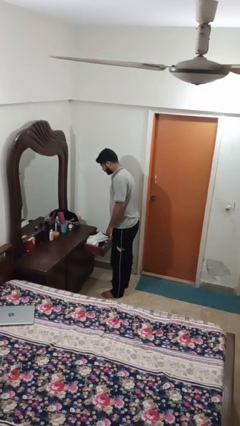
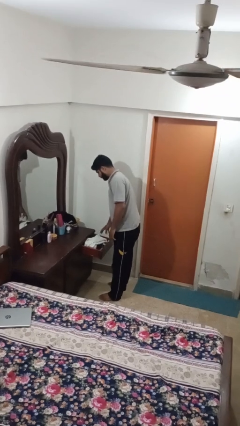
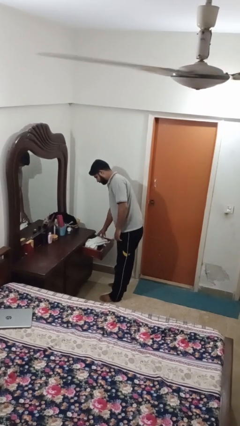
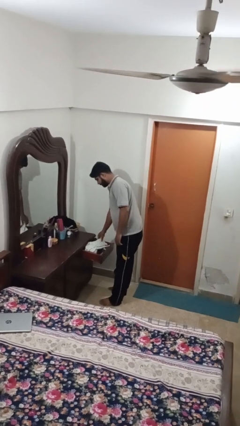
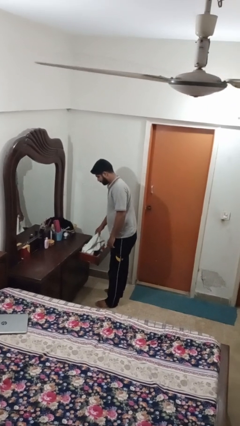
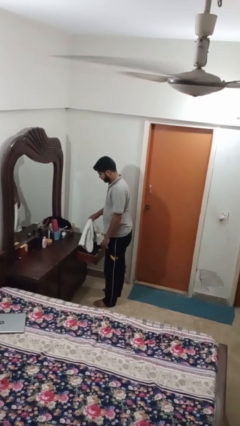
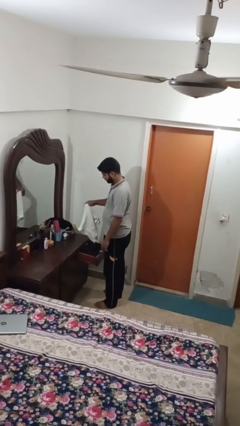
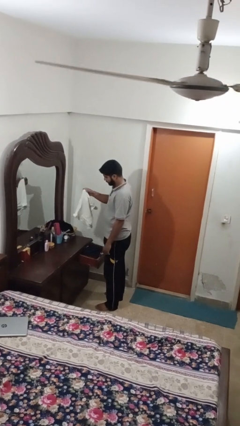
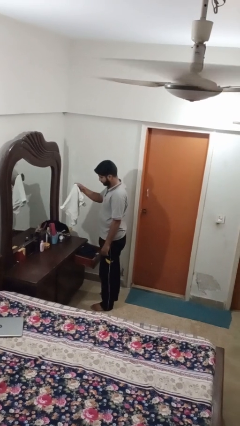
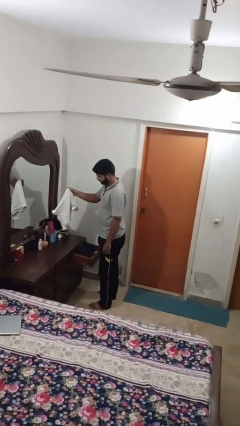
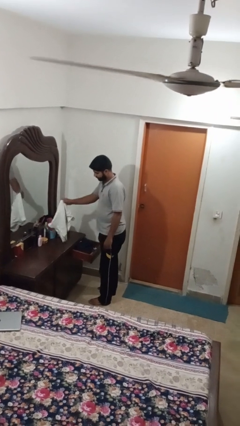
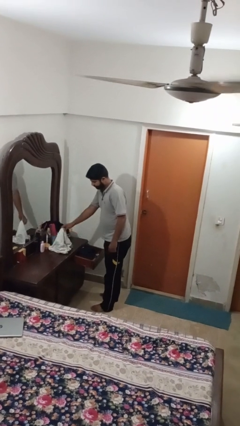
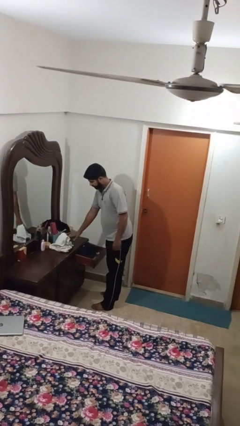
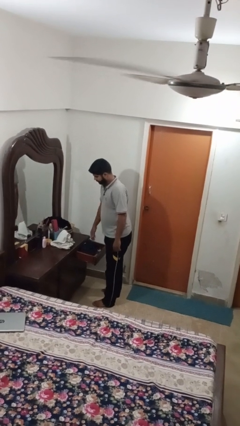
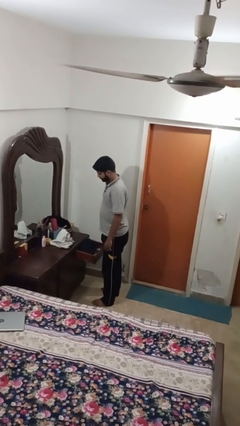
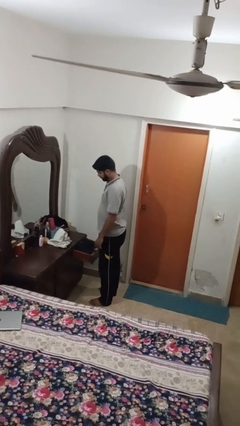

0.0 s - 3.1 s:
person takes clothes from dresser

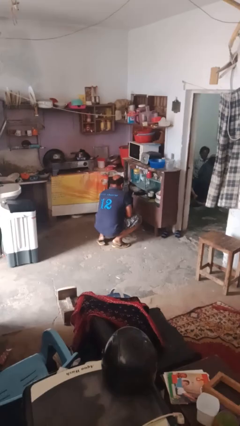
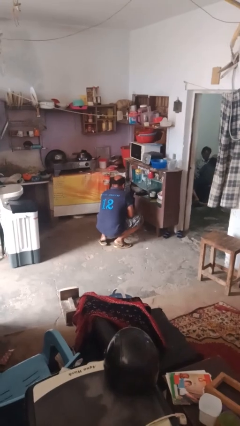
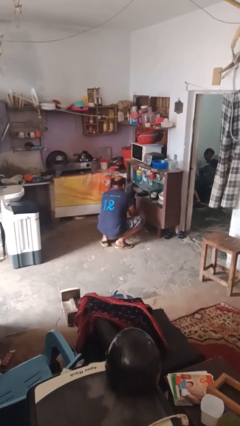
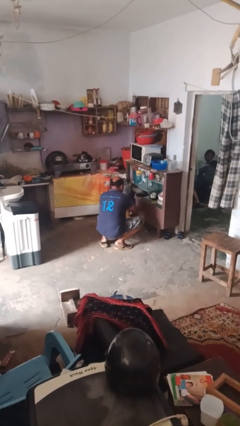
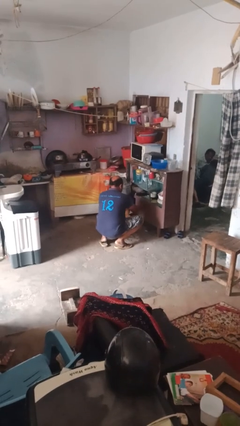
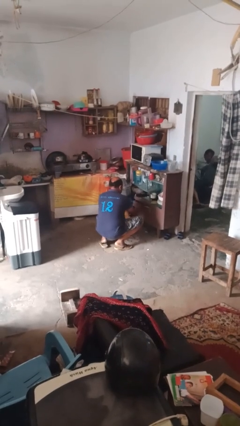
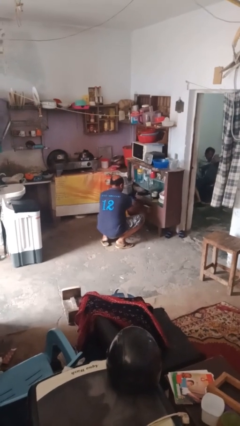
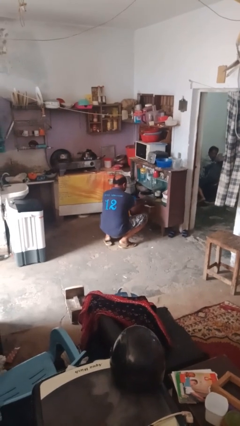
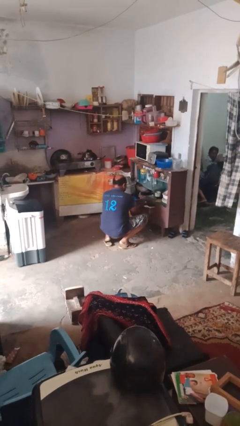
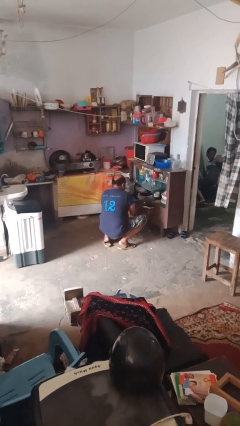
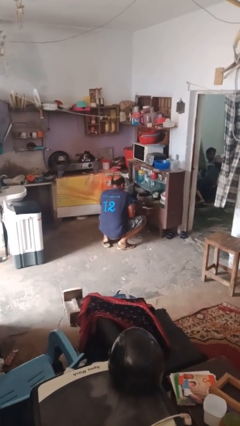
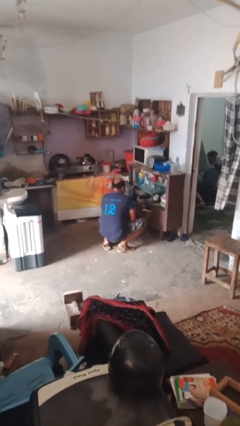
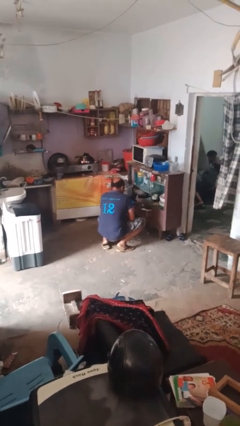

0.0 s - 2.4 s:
person opens kitchen drawer

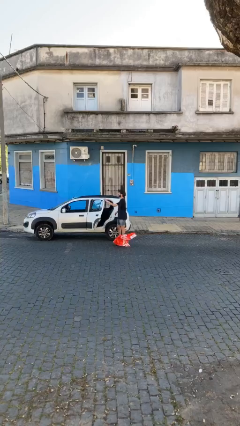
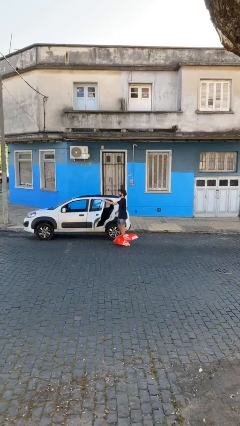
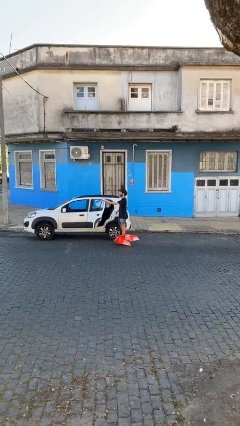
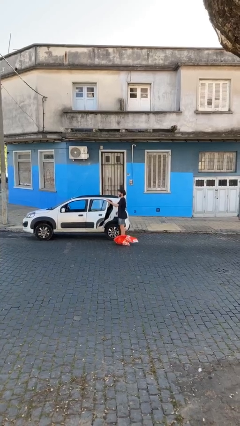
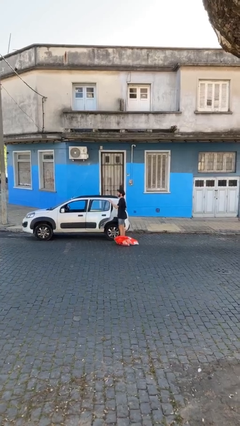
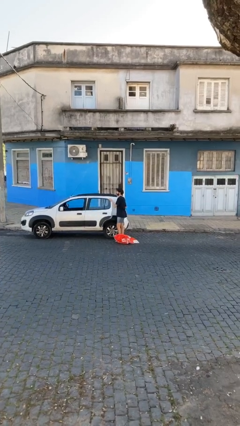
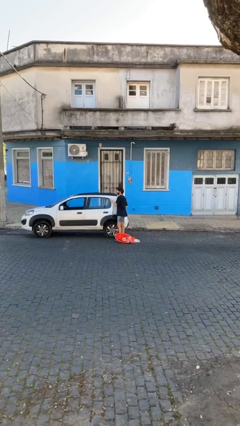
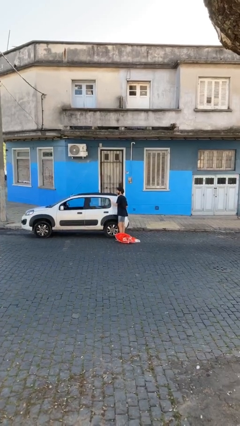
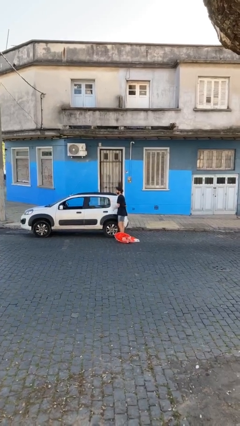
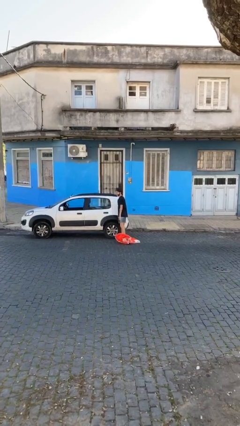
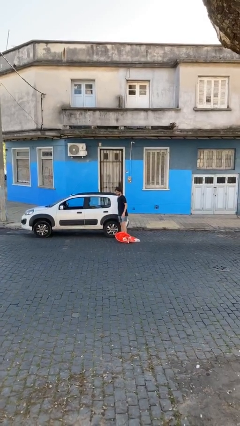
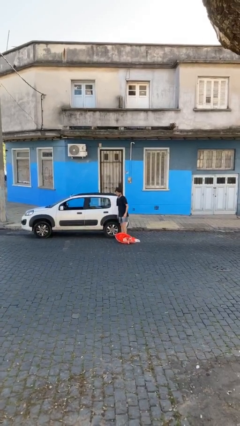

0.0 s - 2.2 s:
person closes car door

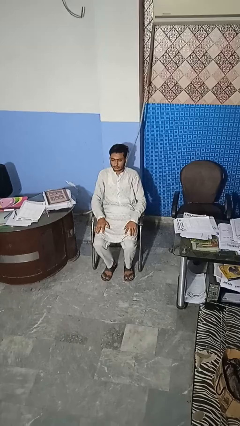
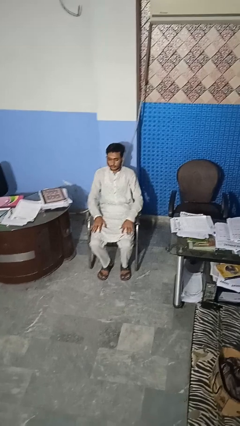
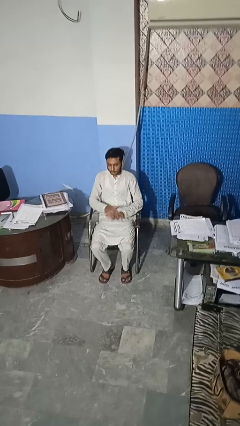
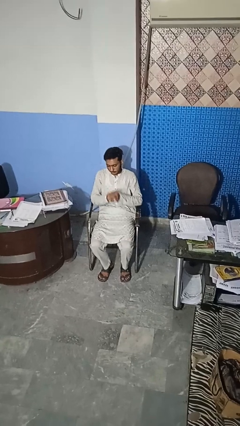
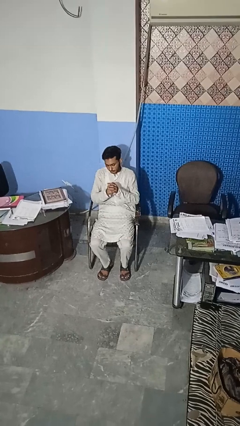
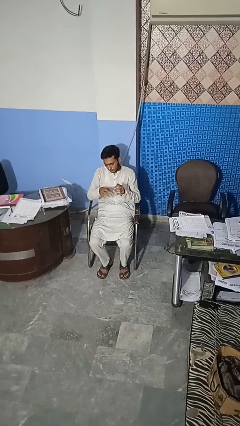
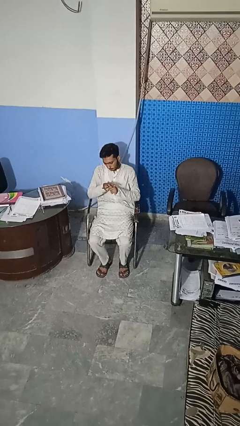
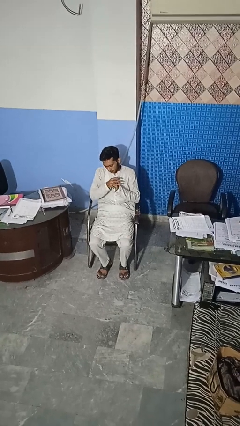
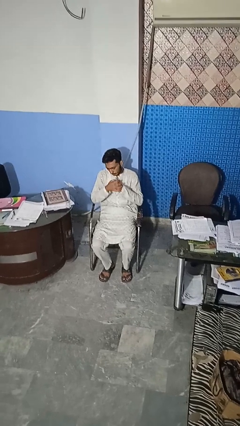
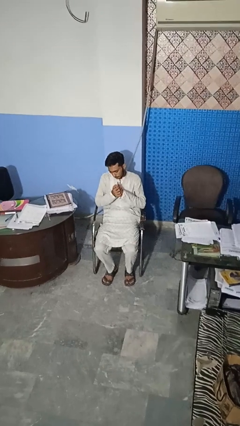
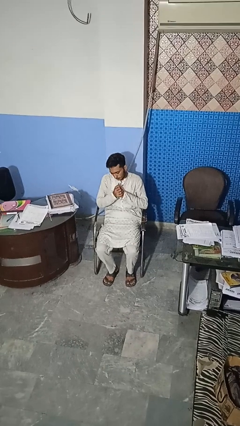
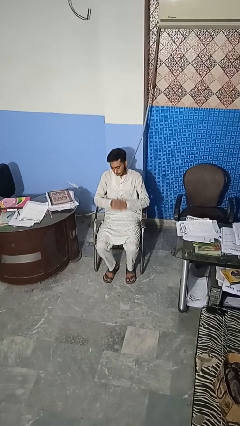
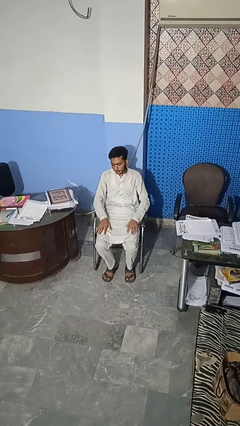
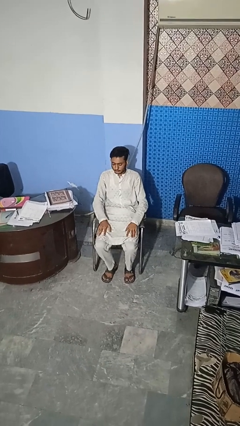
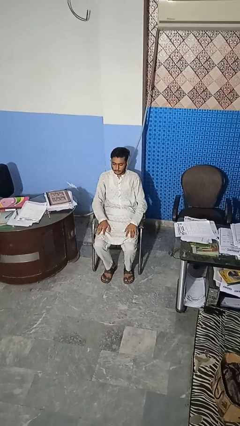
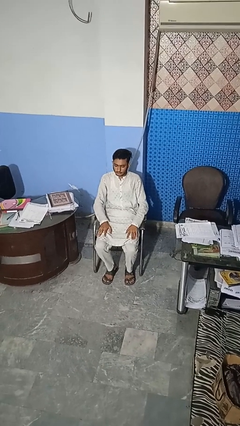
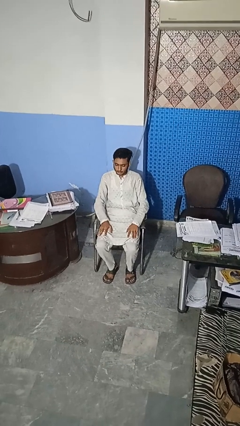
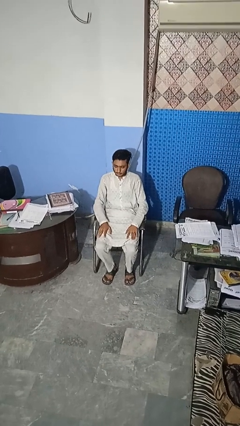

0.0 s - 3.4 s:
person cracks knuckles

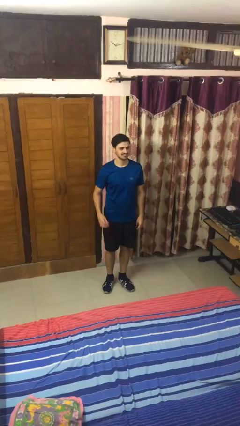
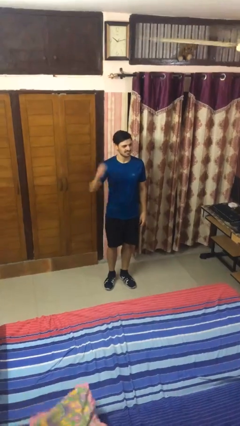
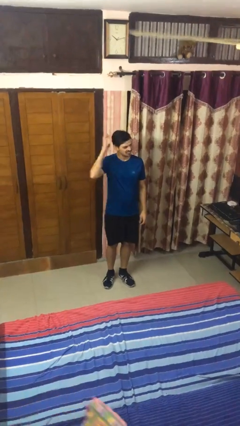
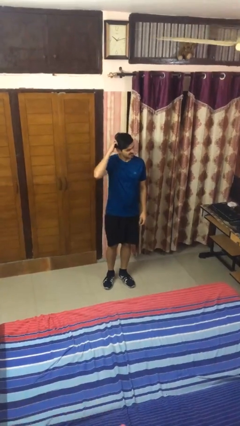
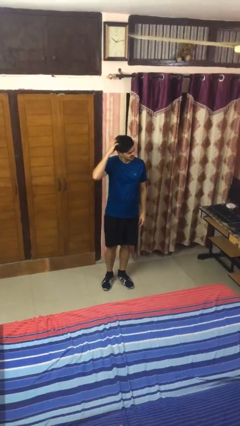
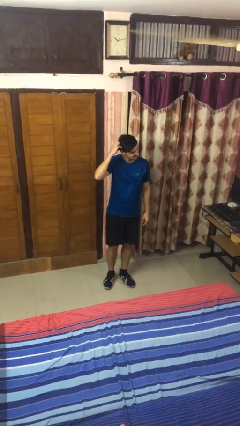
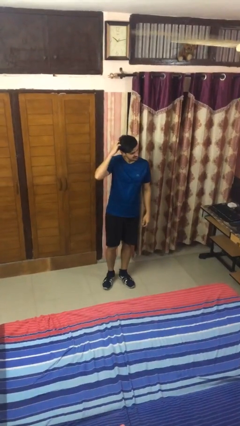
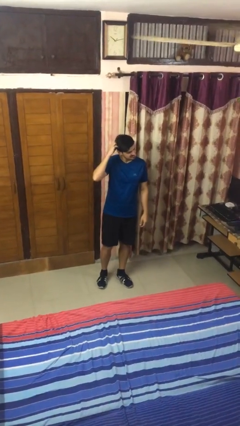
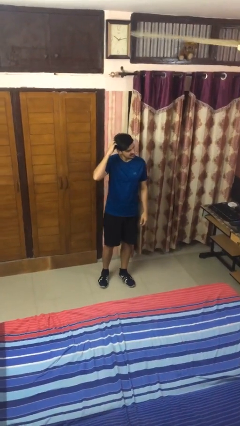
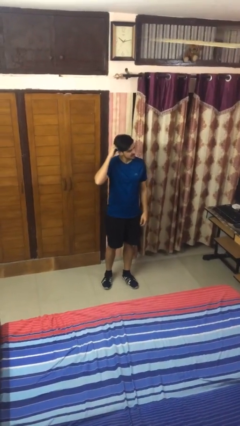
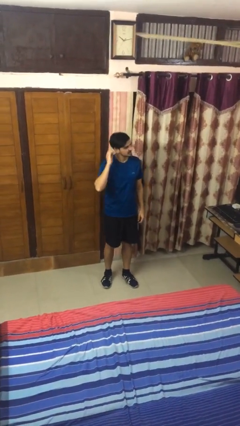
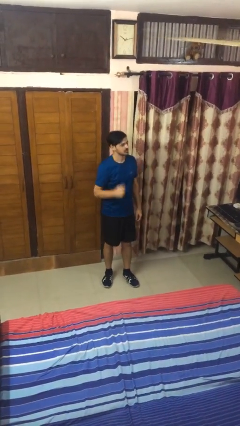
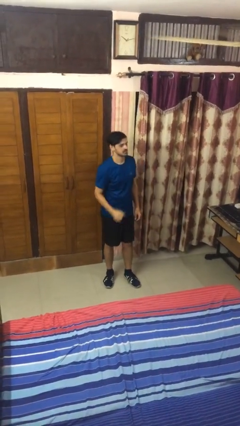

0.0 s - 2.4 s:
person scratches face

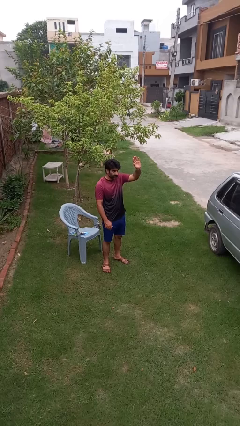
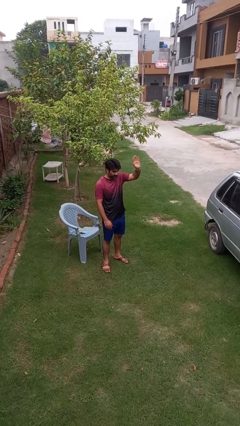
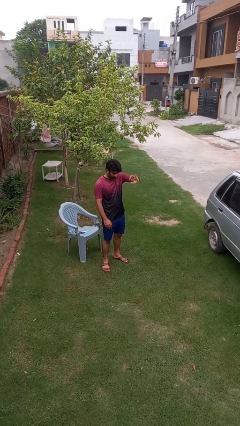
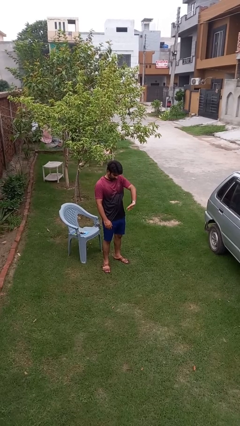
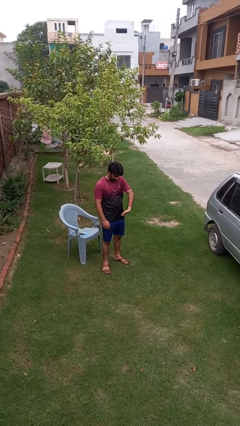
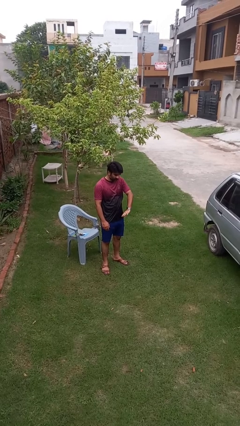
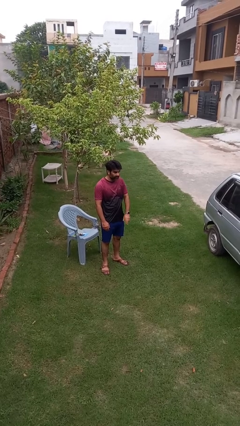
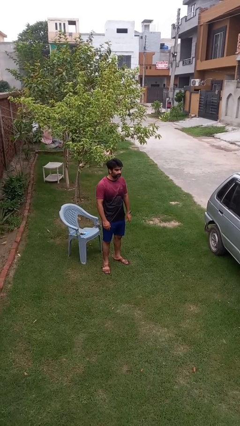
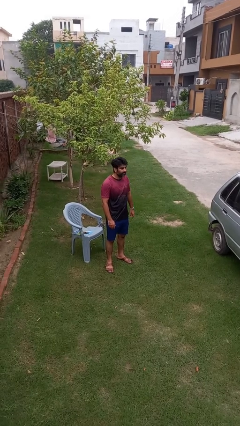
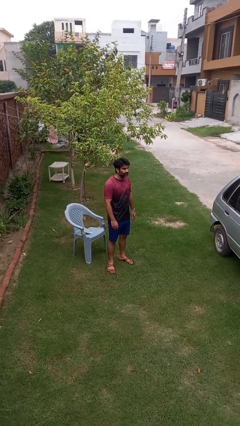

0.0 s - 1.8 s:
person gestures swipe down

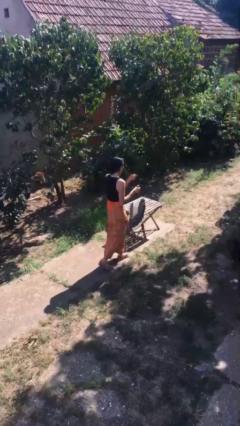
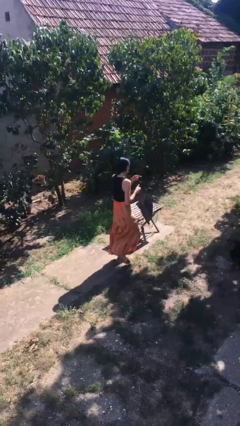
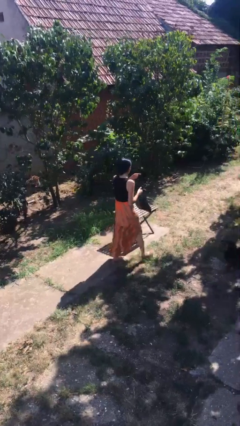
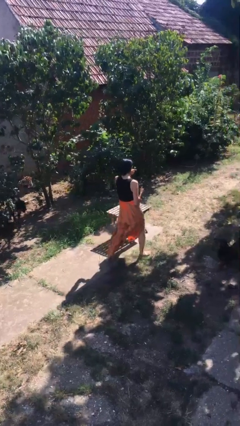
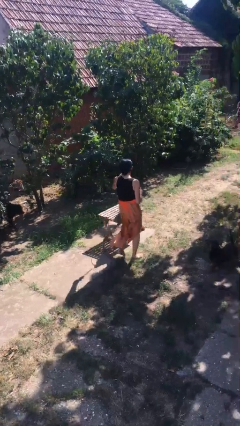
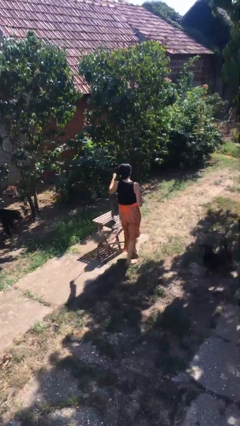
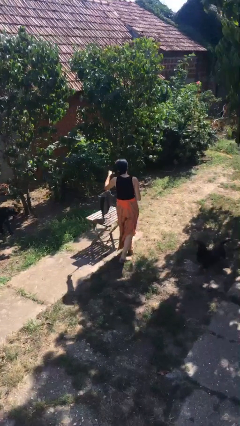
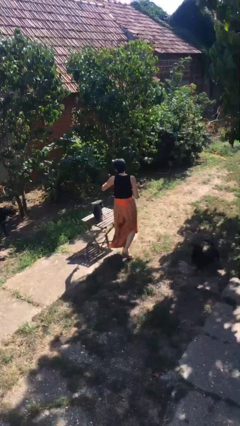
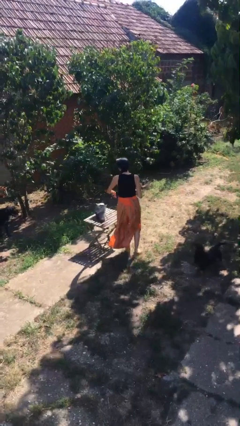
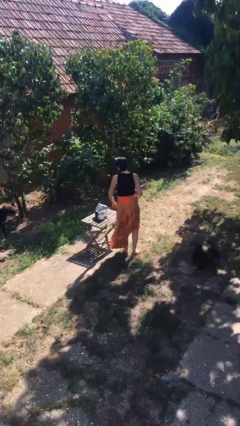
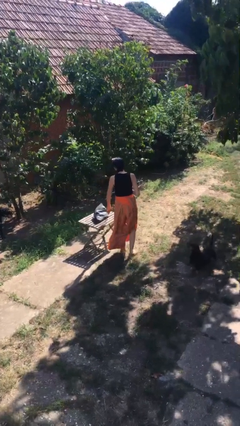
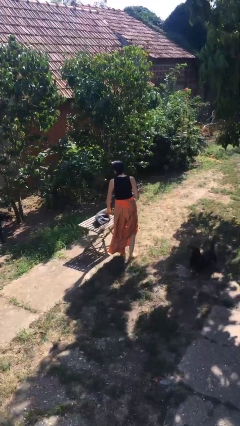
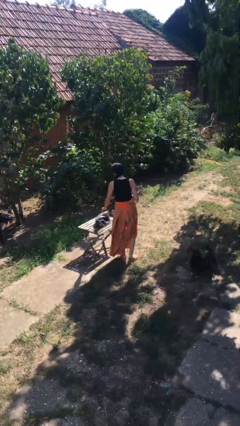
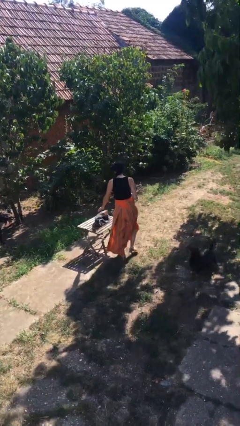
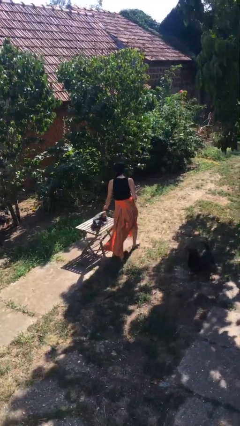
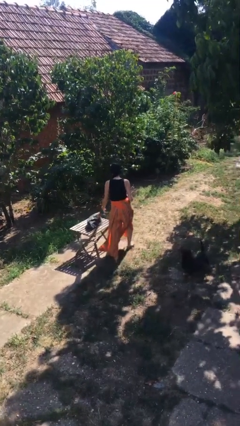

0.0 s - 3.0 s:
person puts down object on table
